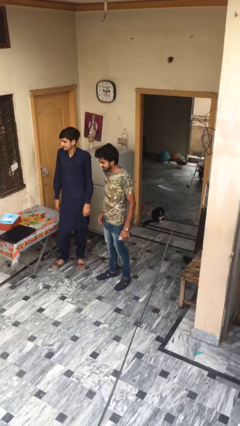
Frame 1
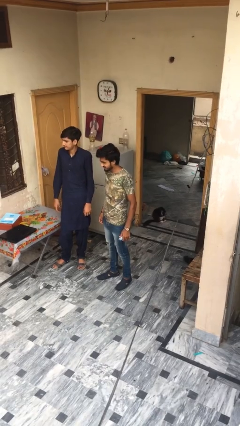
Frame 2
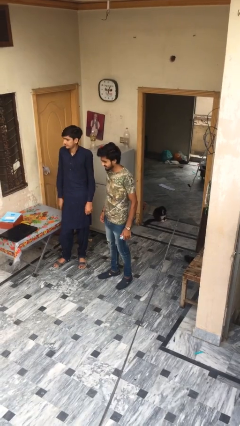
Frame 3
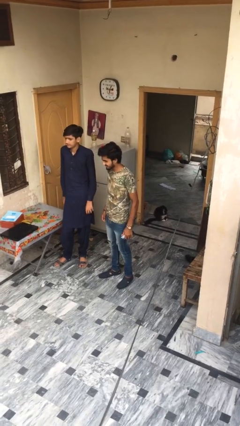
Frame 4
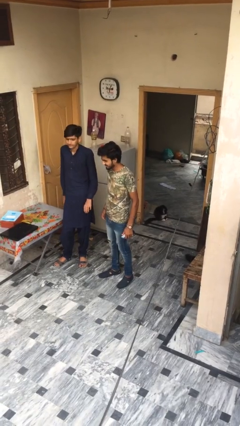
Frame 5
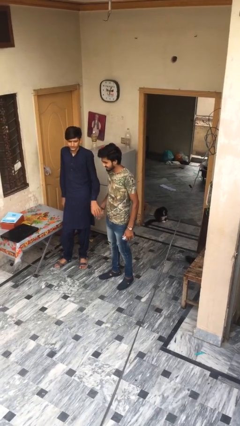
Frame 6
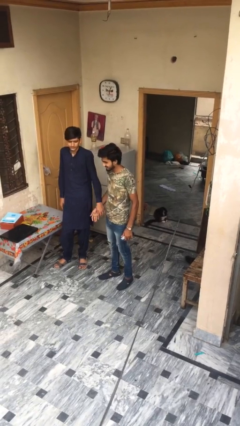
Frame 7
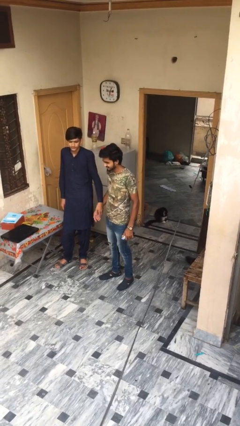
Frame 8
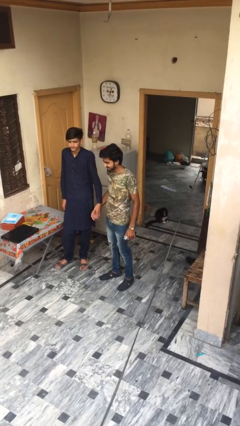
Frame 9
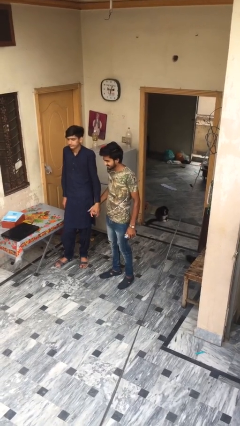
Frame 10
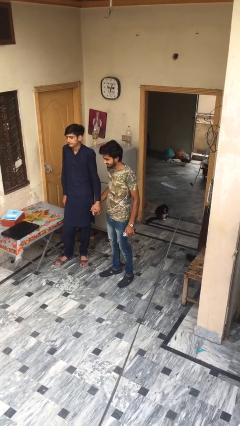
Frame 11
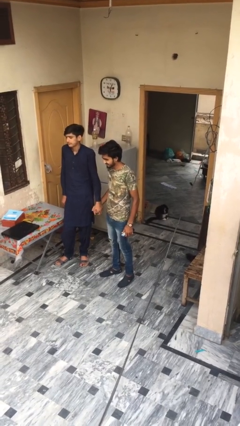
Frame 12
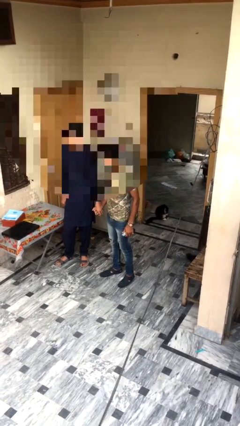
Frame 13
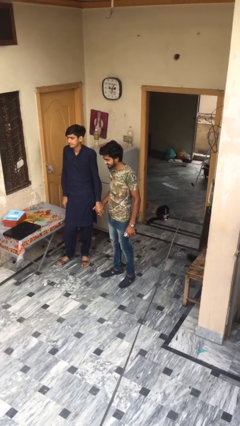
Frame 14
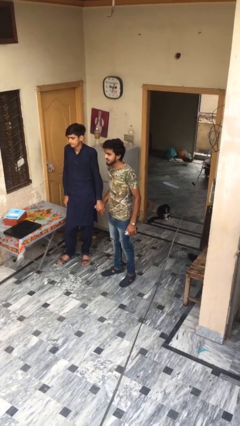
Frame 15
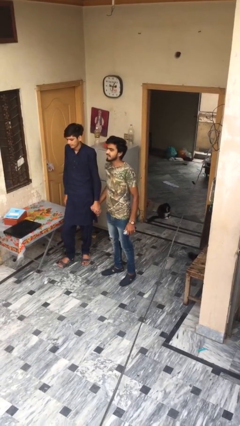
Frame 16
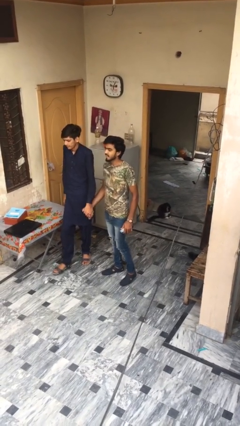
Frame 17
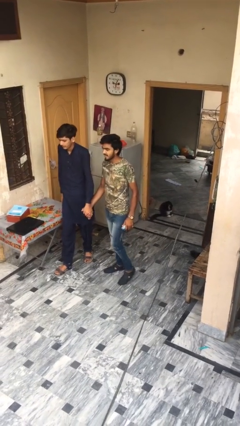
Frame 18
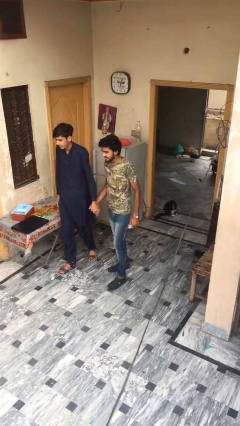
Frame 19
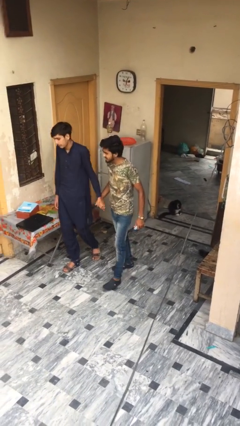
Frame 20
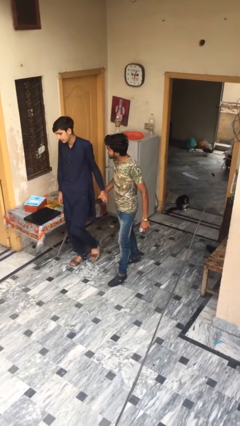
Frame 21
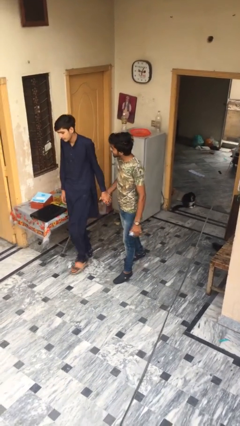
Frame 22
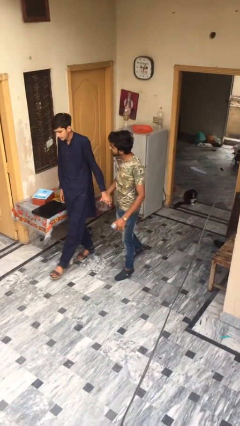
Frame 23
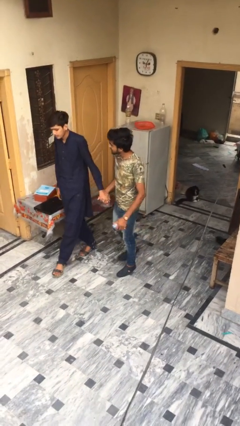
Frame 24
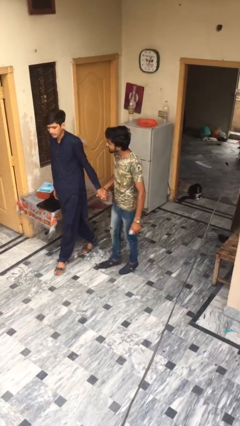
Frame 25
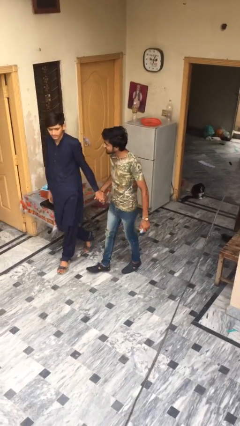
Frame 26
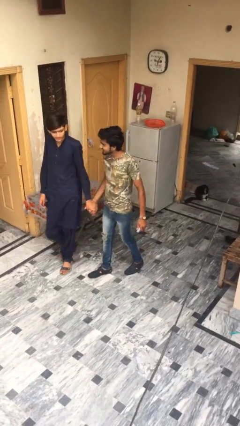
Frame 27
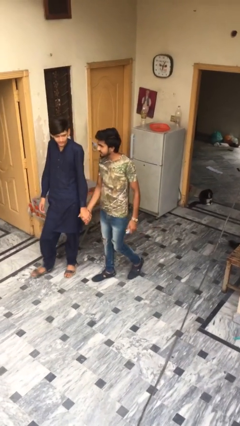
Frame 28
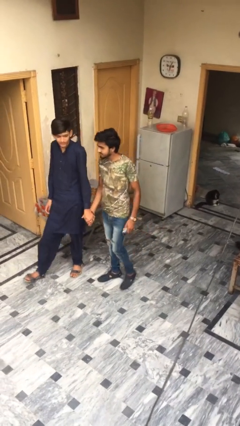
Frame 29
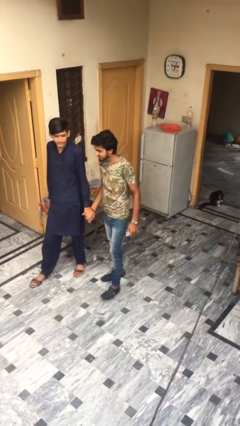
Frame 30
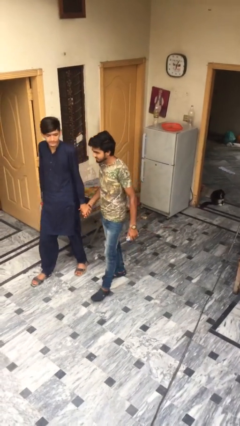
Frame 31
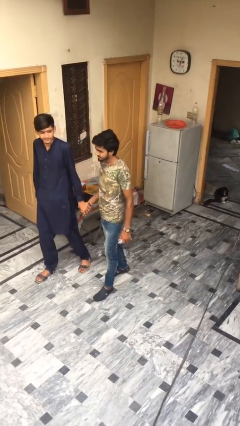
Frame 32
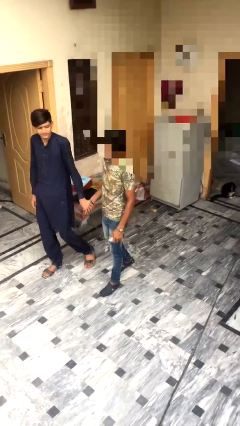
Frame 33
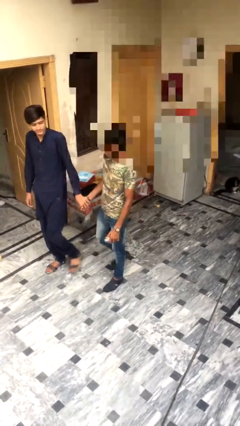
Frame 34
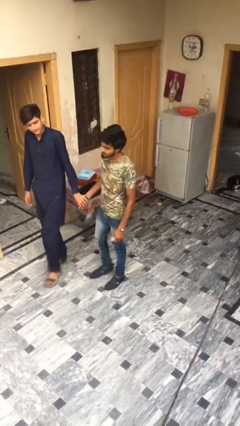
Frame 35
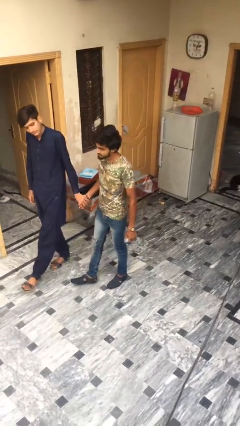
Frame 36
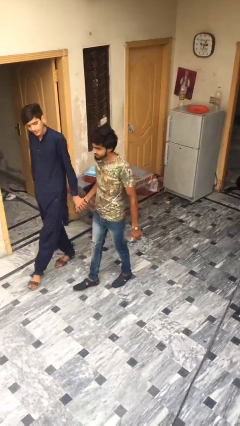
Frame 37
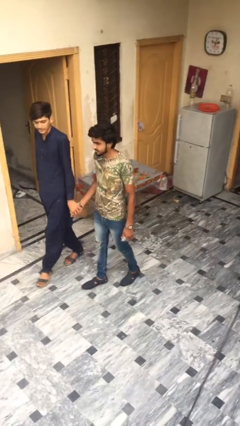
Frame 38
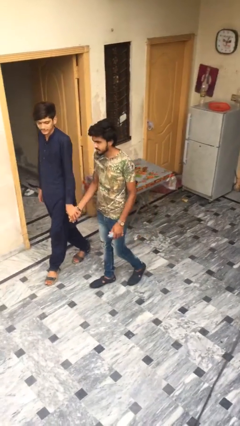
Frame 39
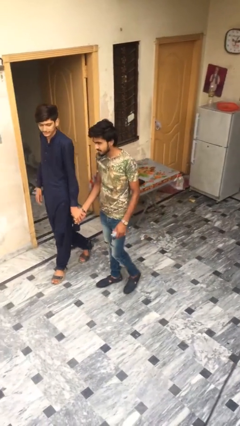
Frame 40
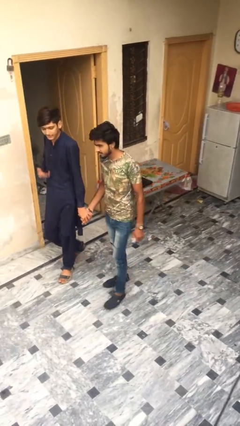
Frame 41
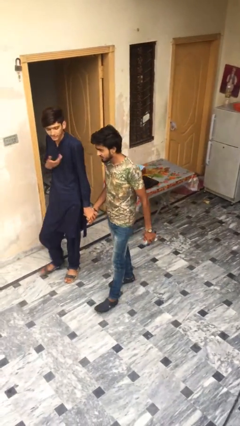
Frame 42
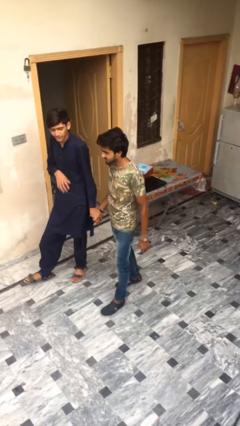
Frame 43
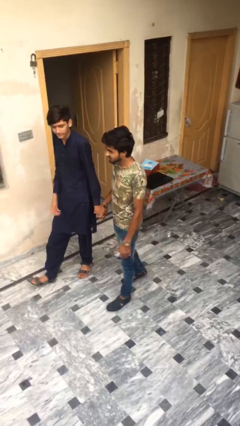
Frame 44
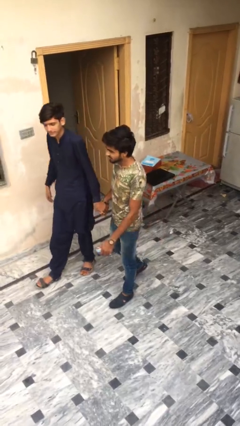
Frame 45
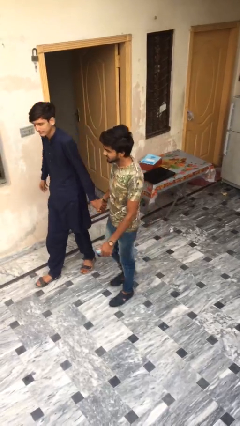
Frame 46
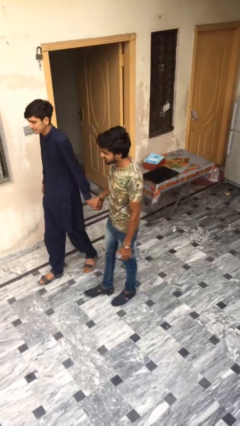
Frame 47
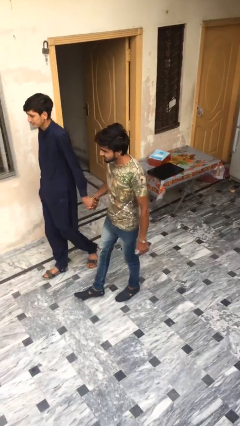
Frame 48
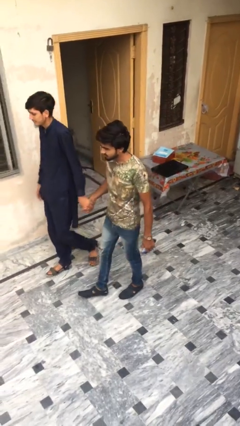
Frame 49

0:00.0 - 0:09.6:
person holds hand

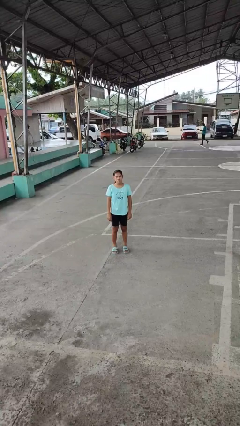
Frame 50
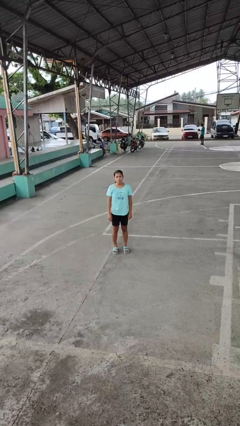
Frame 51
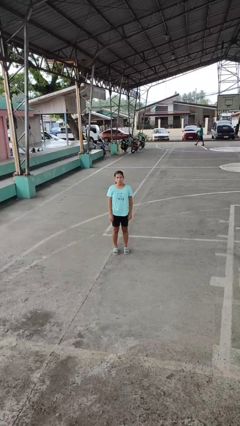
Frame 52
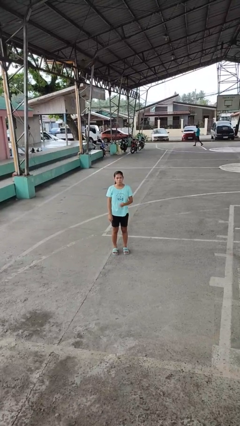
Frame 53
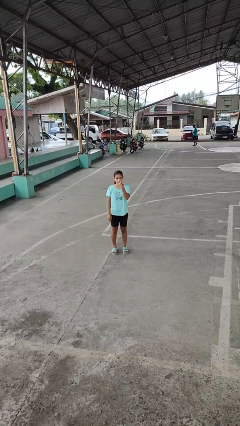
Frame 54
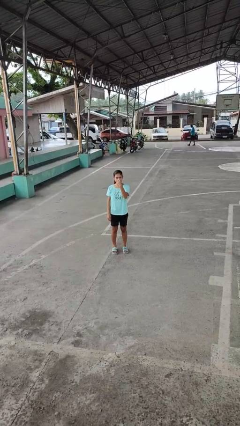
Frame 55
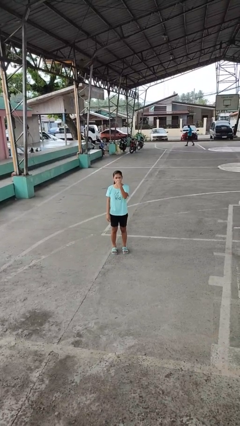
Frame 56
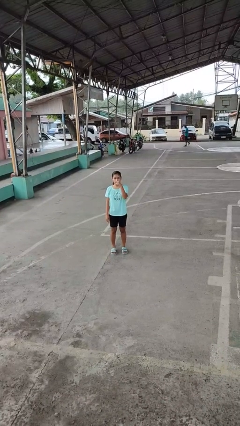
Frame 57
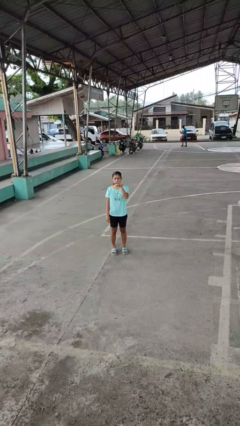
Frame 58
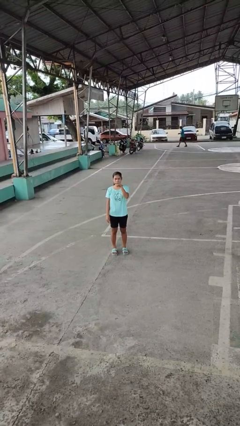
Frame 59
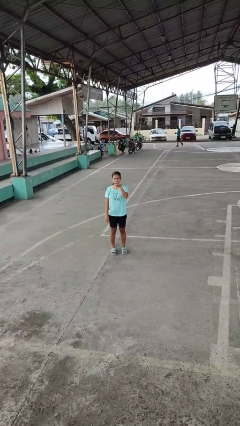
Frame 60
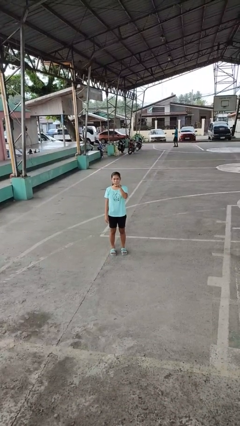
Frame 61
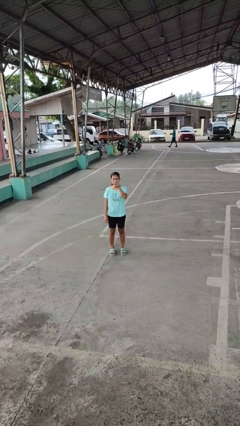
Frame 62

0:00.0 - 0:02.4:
person gestures watch closely

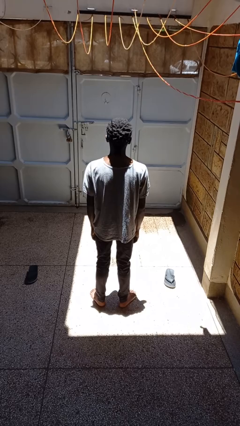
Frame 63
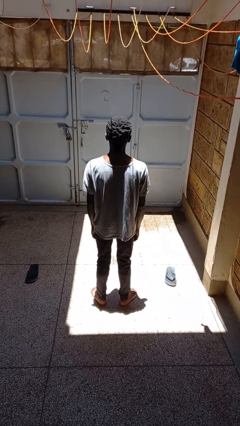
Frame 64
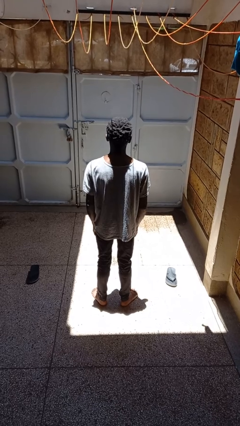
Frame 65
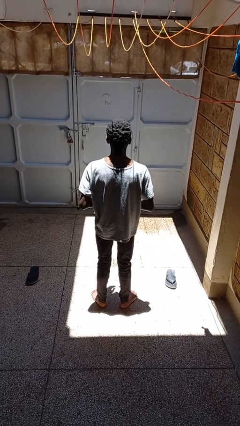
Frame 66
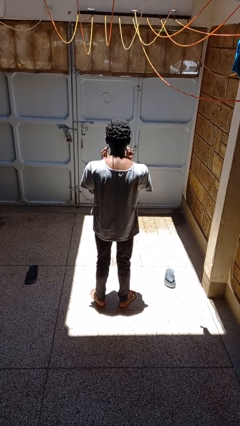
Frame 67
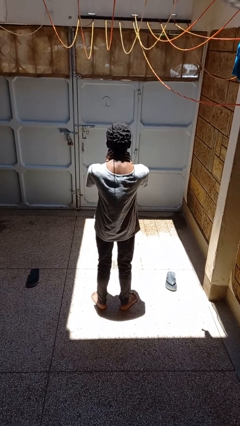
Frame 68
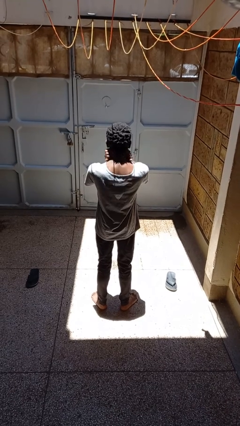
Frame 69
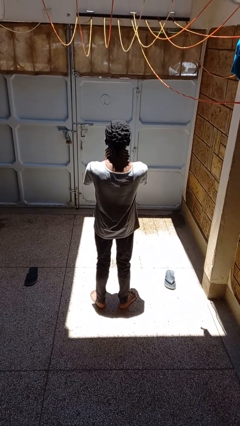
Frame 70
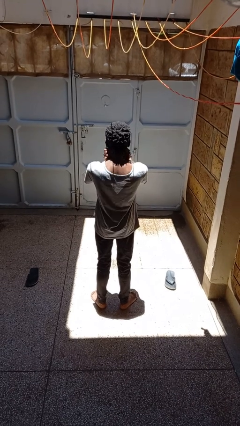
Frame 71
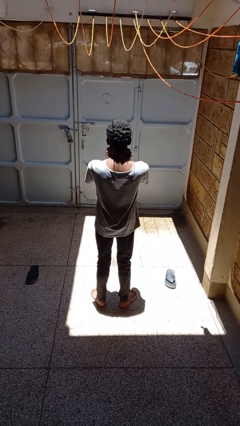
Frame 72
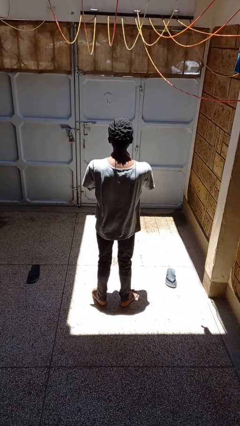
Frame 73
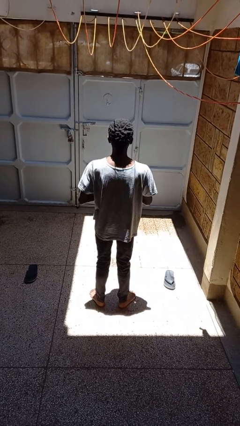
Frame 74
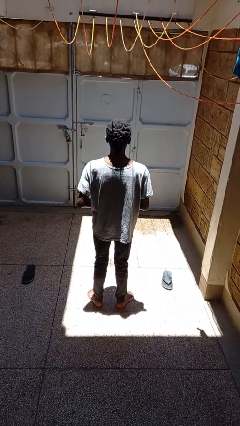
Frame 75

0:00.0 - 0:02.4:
person rubs neck

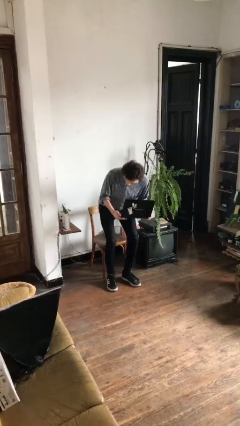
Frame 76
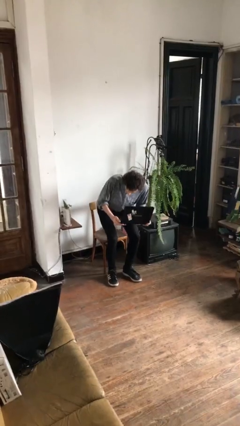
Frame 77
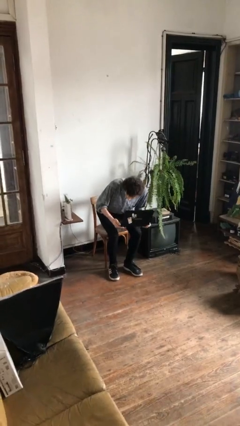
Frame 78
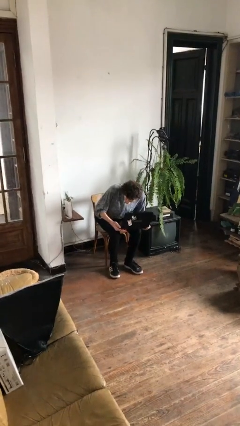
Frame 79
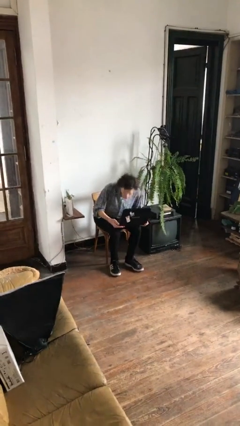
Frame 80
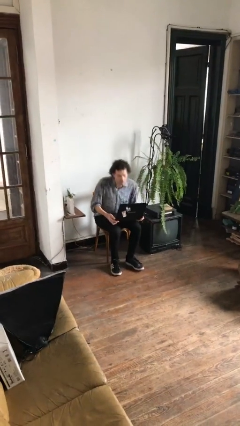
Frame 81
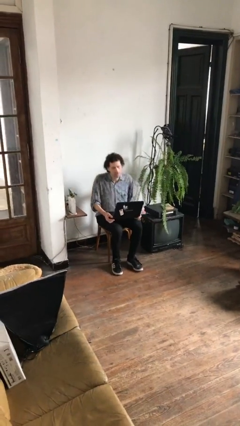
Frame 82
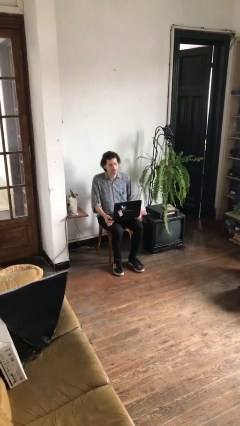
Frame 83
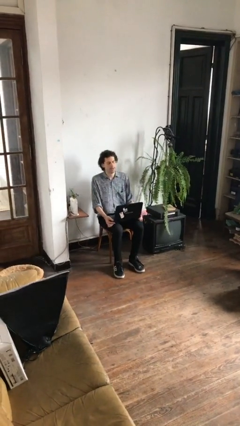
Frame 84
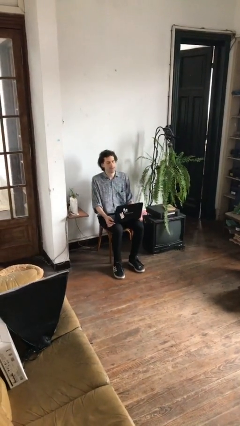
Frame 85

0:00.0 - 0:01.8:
person sits down

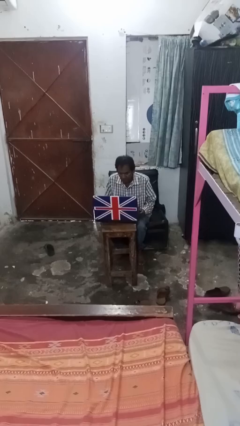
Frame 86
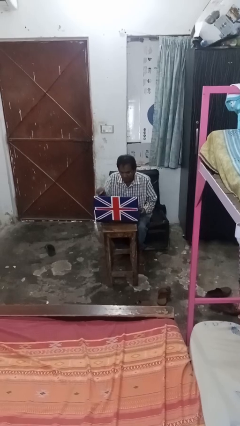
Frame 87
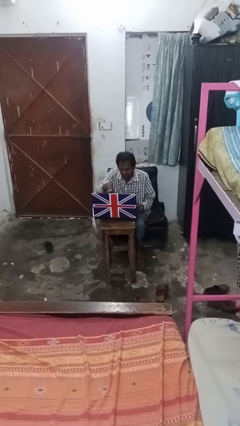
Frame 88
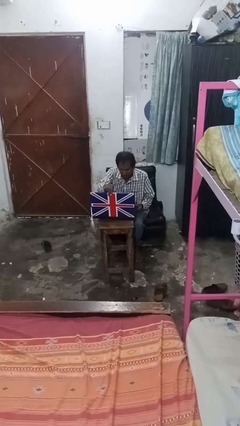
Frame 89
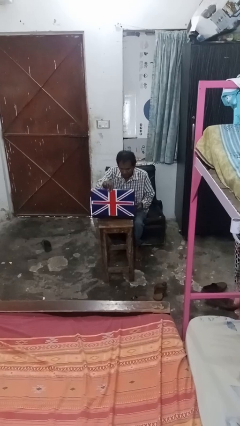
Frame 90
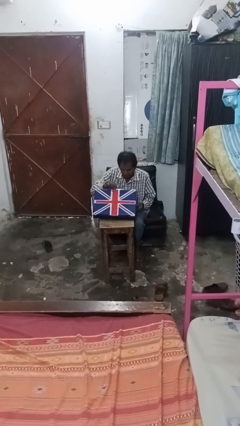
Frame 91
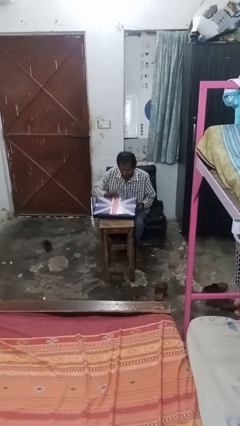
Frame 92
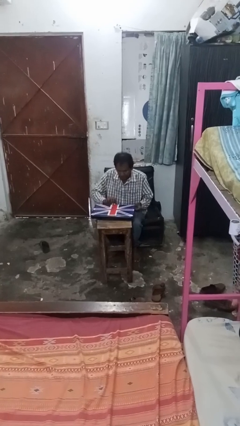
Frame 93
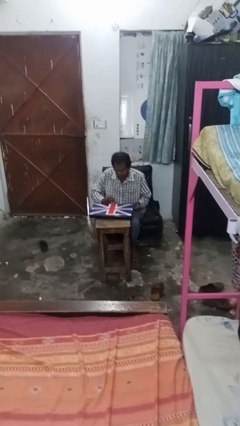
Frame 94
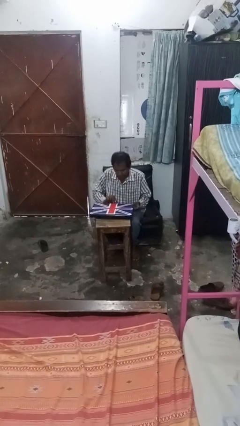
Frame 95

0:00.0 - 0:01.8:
person closes laptop
